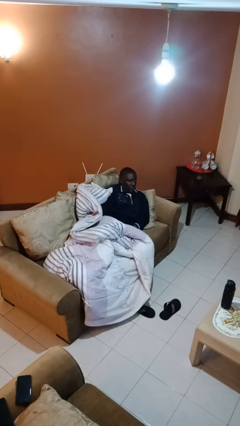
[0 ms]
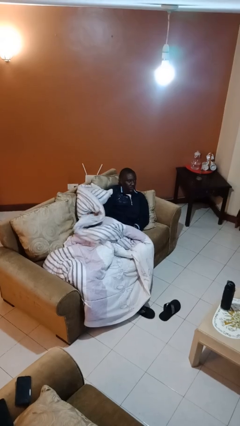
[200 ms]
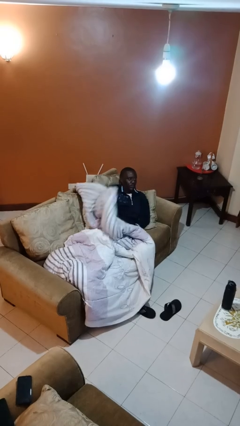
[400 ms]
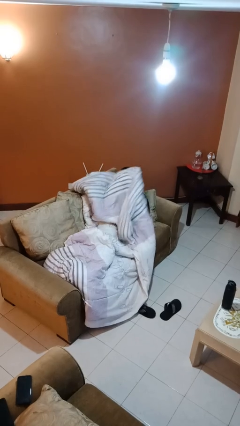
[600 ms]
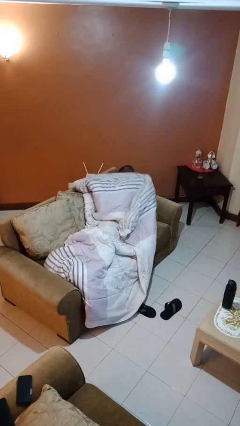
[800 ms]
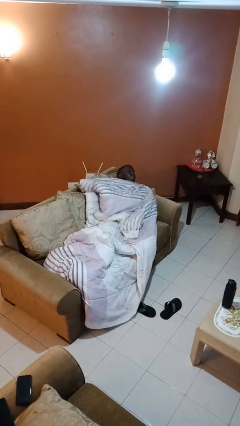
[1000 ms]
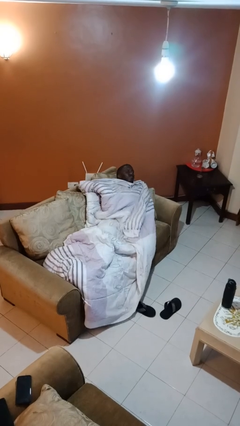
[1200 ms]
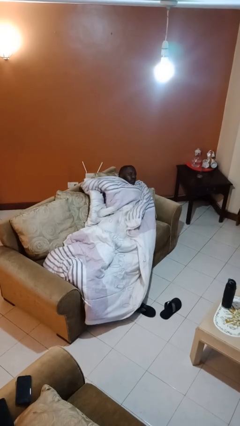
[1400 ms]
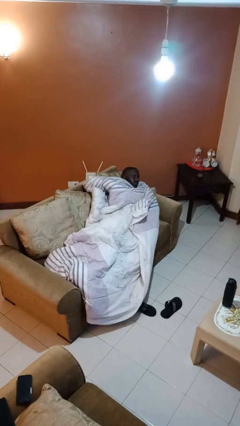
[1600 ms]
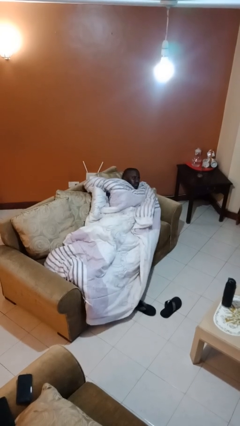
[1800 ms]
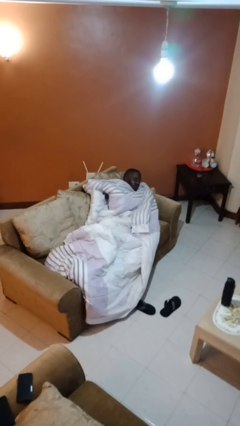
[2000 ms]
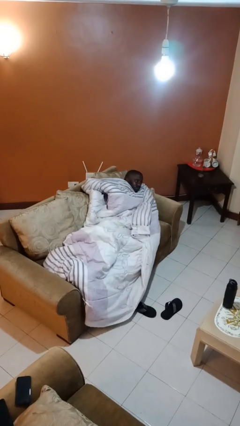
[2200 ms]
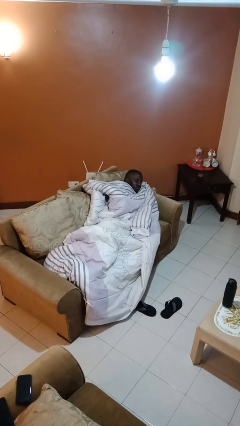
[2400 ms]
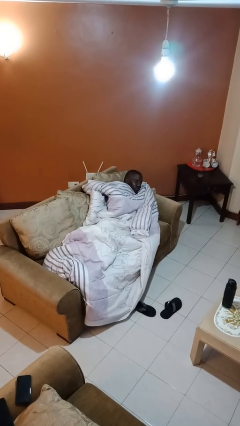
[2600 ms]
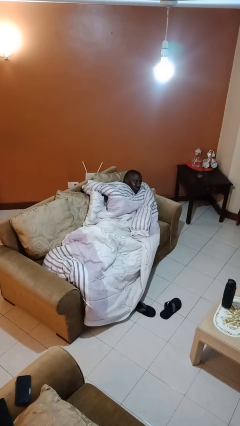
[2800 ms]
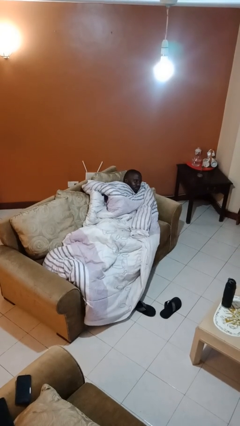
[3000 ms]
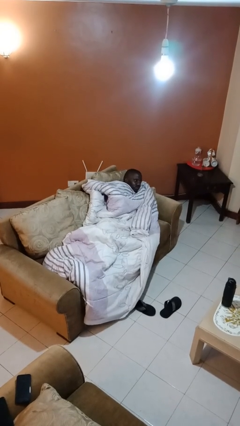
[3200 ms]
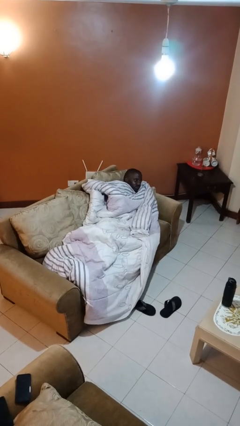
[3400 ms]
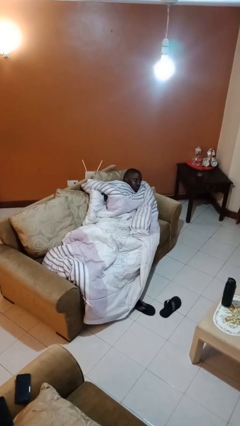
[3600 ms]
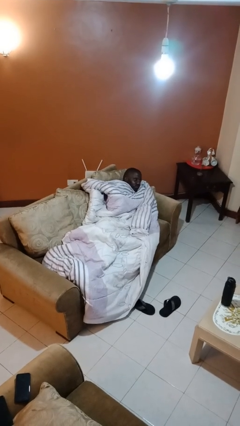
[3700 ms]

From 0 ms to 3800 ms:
person covers with blanket

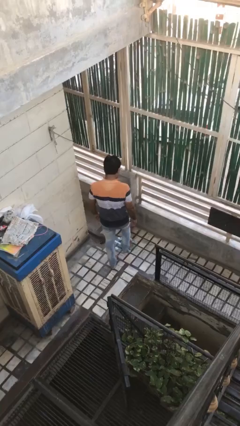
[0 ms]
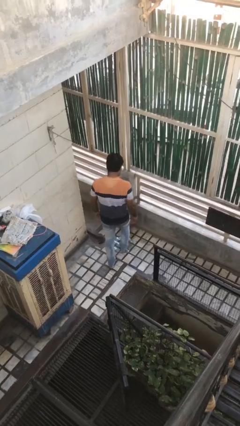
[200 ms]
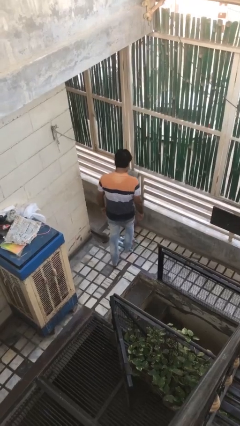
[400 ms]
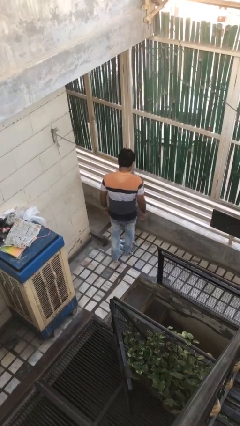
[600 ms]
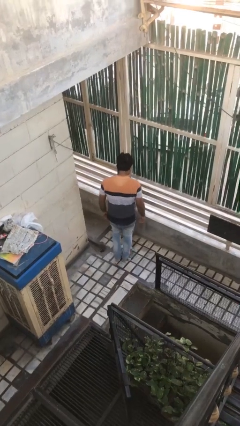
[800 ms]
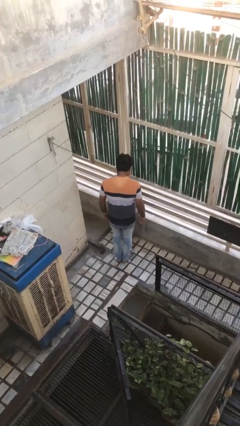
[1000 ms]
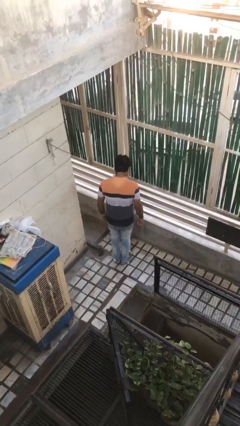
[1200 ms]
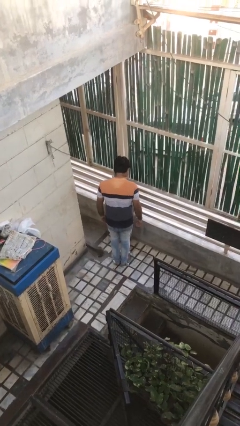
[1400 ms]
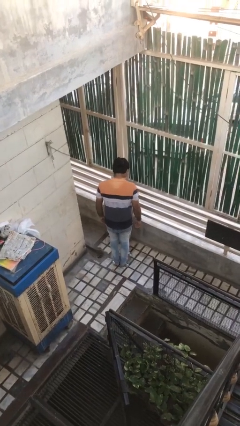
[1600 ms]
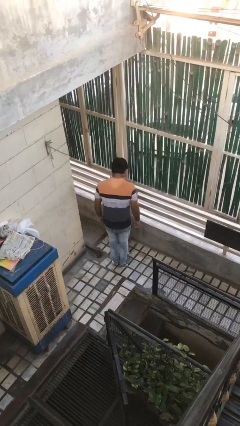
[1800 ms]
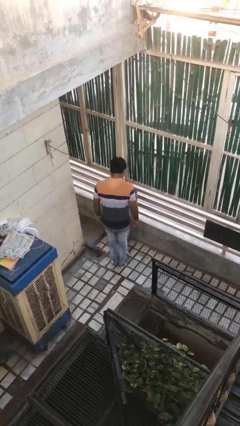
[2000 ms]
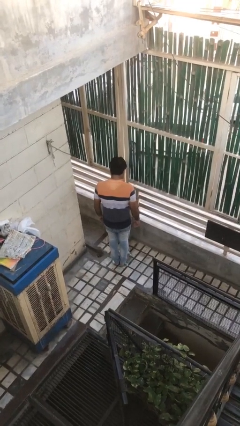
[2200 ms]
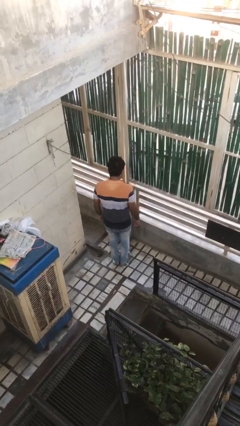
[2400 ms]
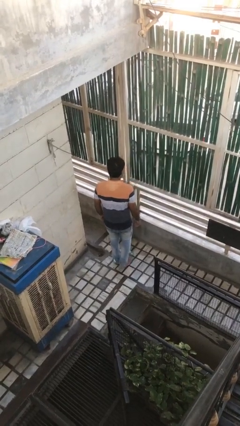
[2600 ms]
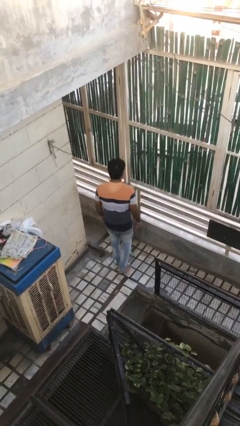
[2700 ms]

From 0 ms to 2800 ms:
person uses bodyweight scale

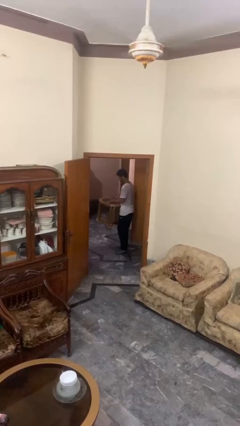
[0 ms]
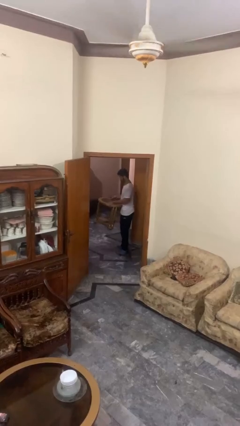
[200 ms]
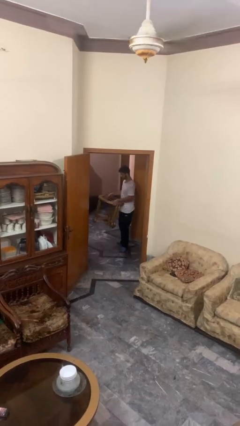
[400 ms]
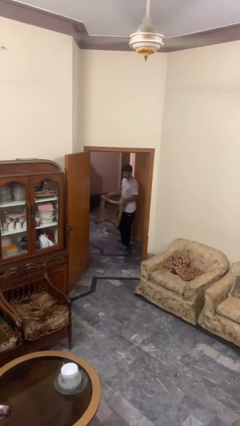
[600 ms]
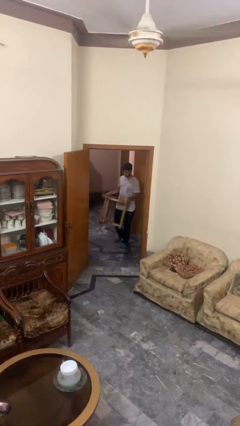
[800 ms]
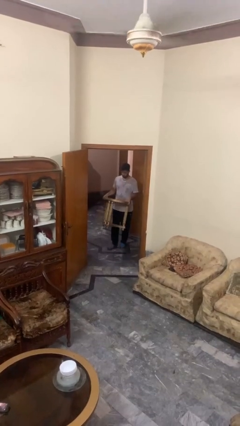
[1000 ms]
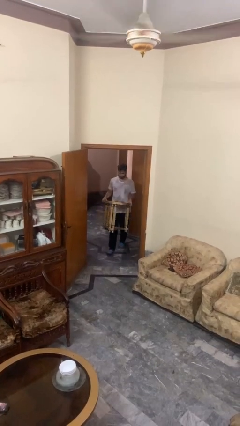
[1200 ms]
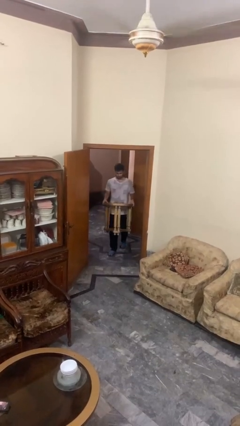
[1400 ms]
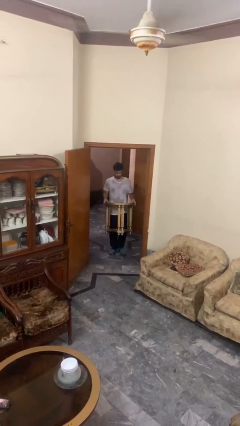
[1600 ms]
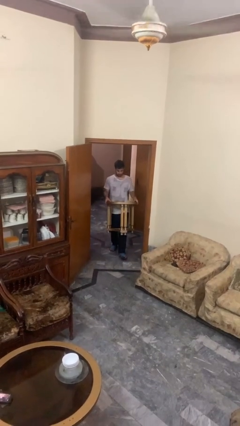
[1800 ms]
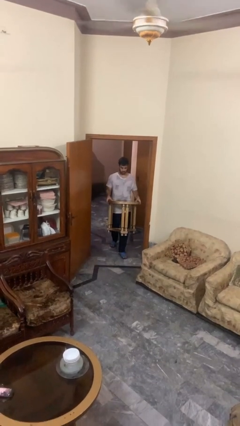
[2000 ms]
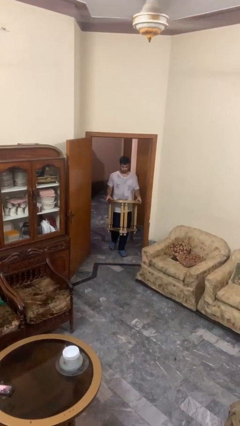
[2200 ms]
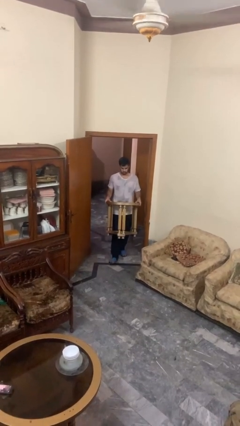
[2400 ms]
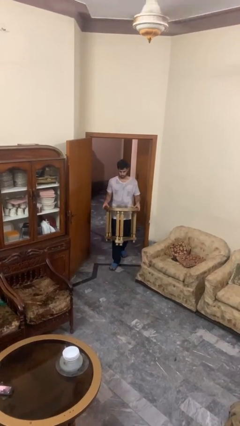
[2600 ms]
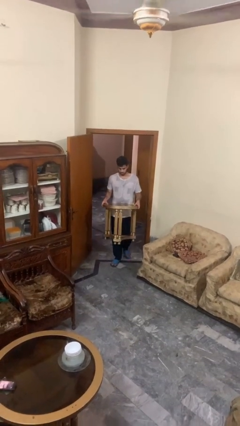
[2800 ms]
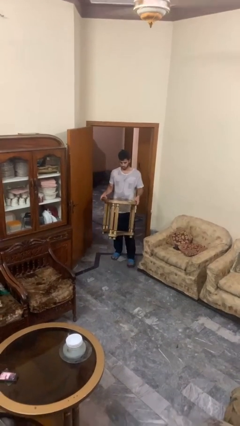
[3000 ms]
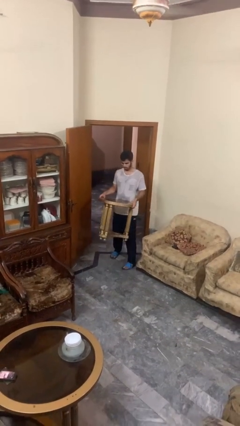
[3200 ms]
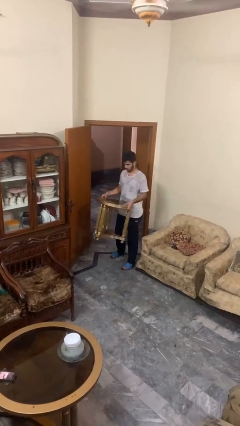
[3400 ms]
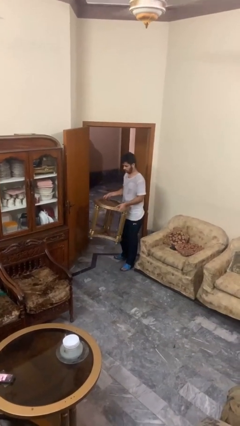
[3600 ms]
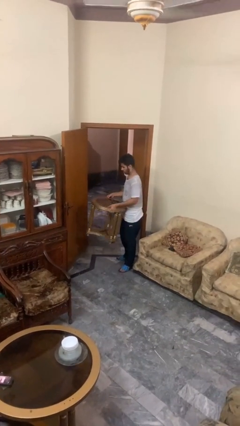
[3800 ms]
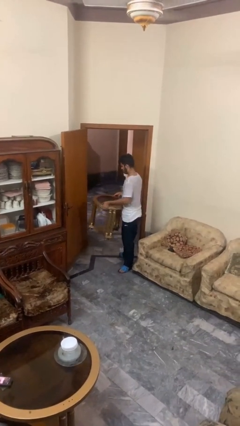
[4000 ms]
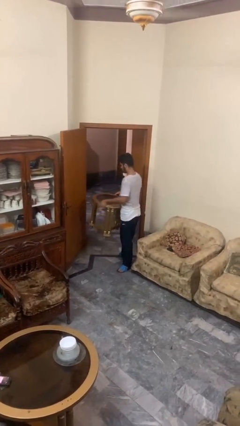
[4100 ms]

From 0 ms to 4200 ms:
person carries furniture

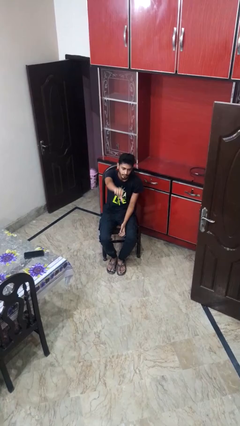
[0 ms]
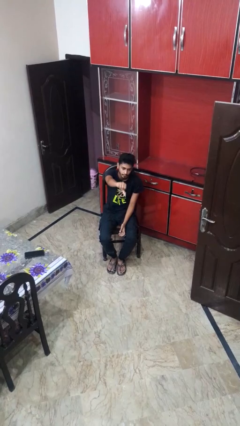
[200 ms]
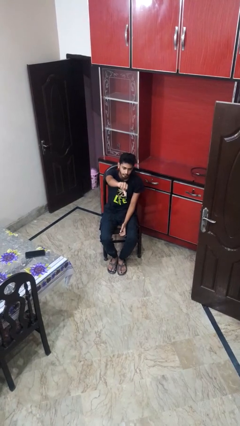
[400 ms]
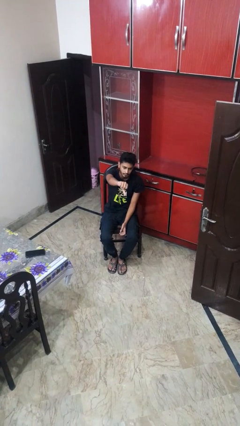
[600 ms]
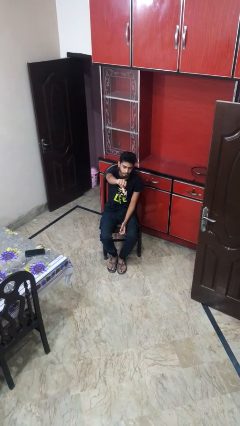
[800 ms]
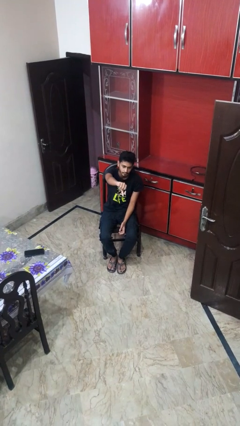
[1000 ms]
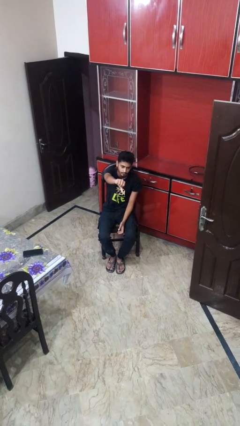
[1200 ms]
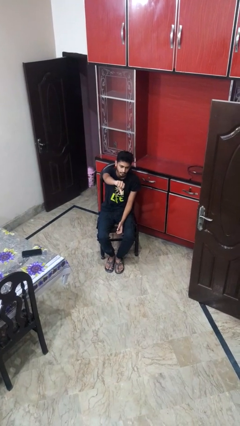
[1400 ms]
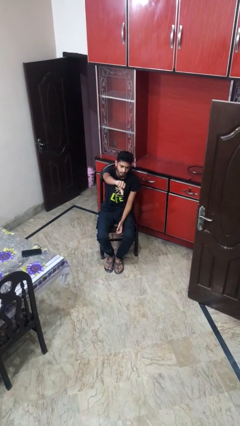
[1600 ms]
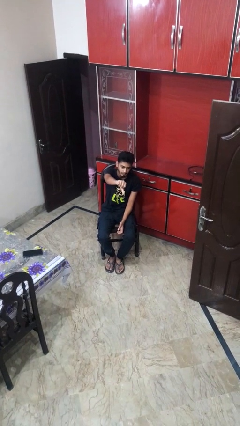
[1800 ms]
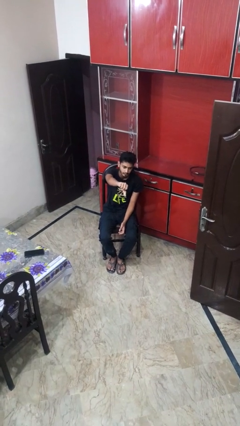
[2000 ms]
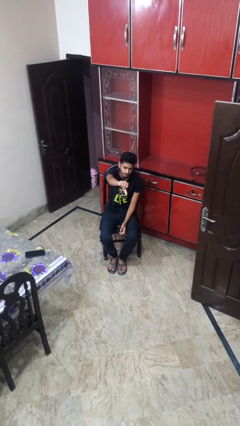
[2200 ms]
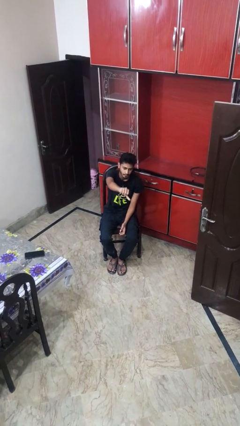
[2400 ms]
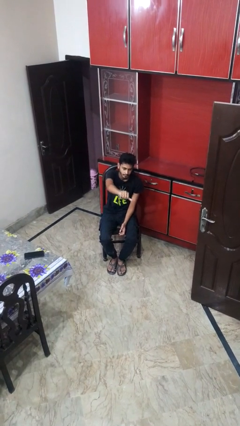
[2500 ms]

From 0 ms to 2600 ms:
person gestures thumbs down

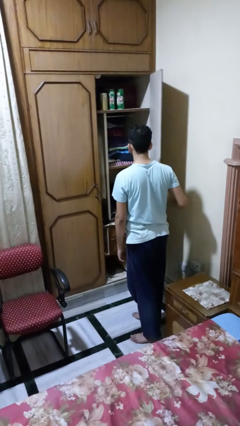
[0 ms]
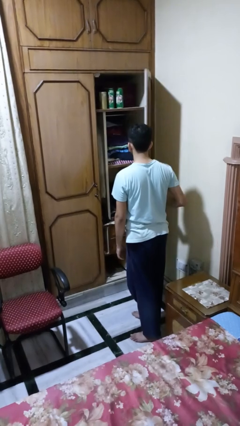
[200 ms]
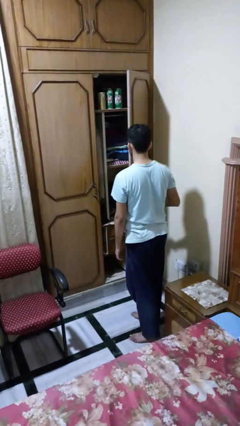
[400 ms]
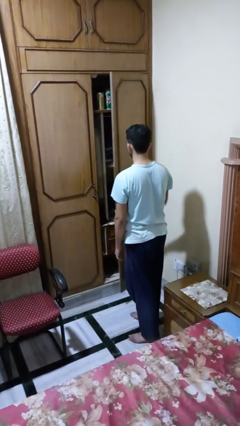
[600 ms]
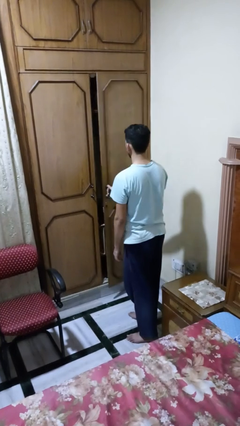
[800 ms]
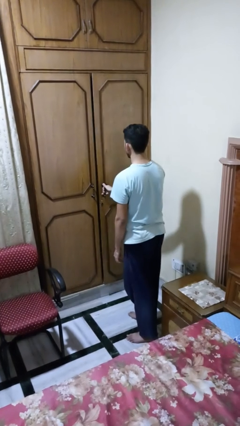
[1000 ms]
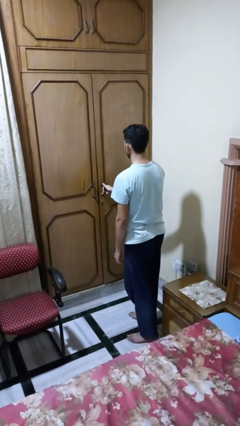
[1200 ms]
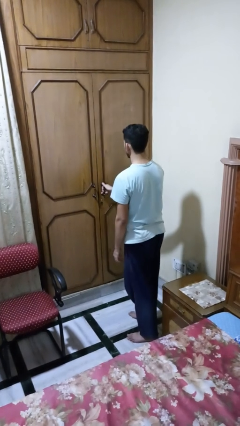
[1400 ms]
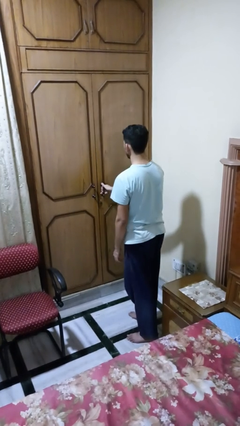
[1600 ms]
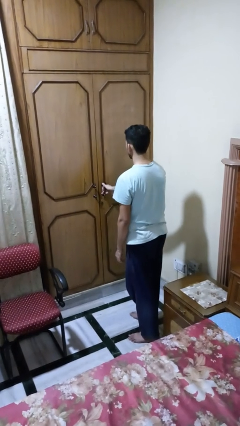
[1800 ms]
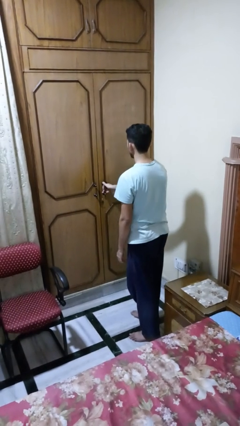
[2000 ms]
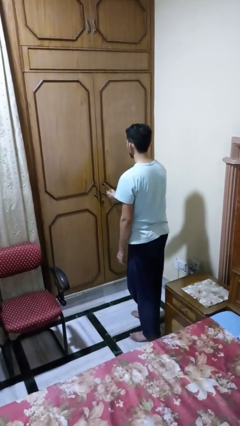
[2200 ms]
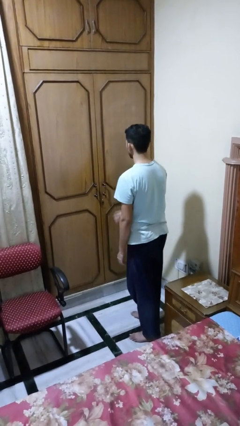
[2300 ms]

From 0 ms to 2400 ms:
person closes closet door

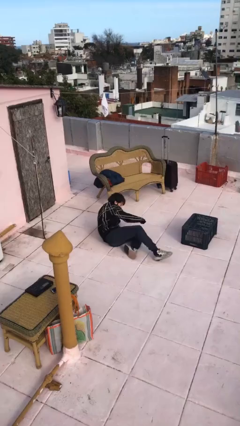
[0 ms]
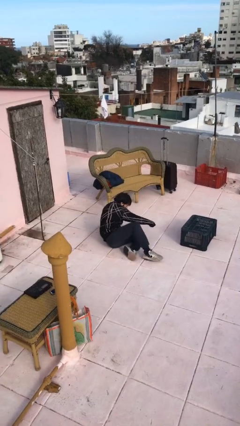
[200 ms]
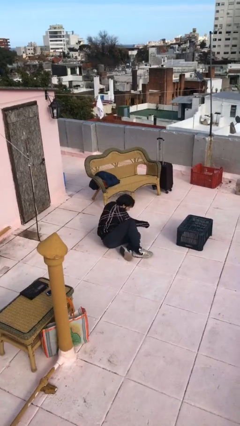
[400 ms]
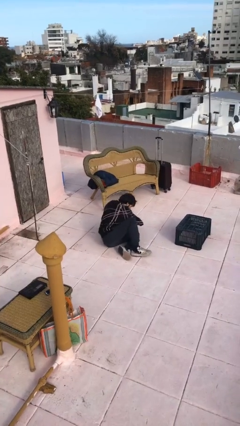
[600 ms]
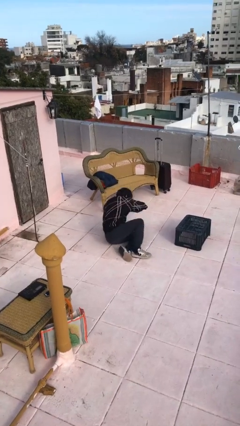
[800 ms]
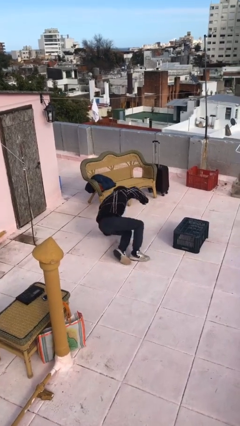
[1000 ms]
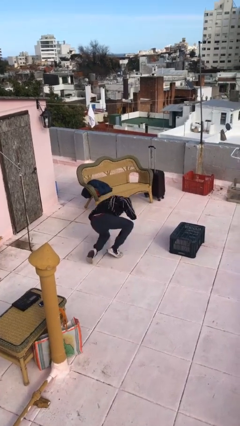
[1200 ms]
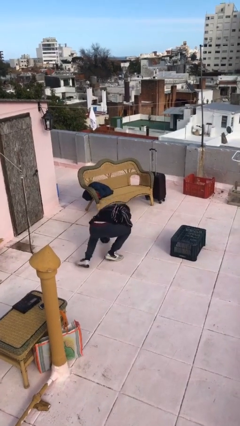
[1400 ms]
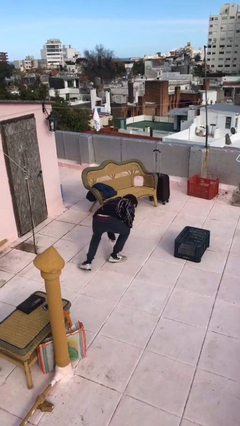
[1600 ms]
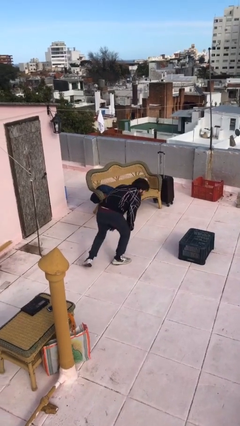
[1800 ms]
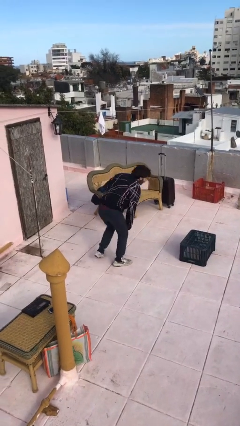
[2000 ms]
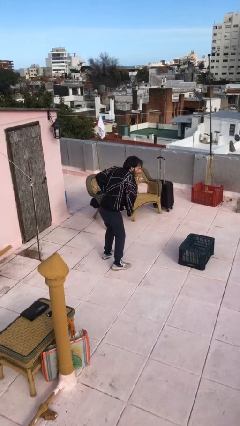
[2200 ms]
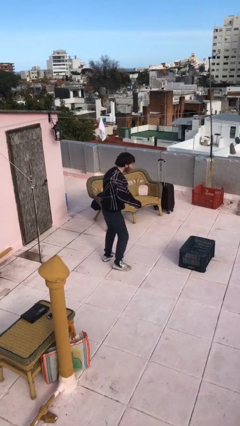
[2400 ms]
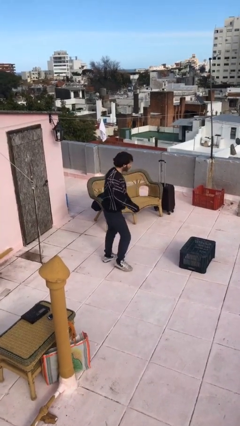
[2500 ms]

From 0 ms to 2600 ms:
person stands up from floor
